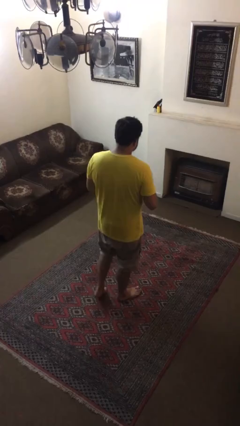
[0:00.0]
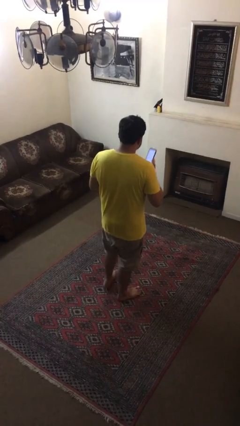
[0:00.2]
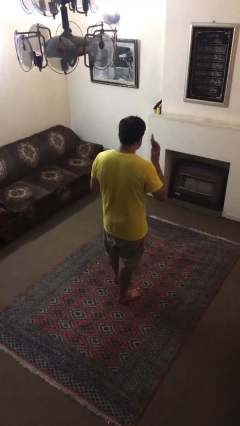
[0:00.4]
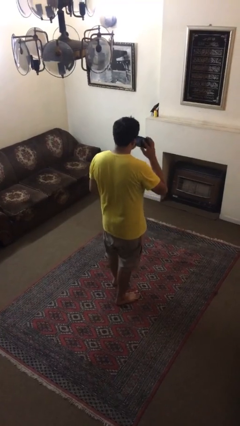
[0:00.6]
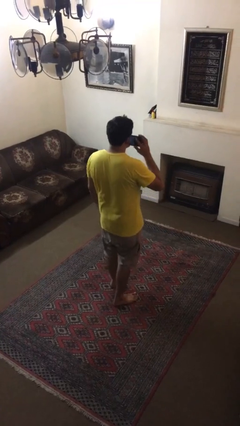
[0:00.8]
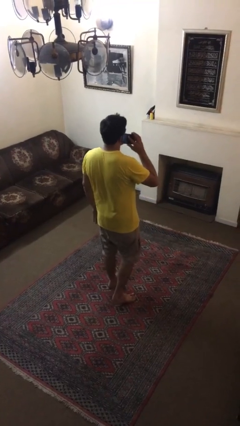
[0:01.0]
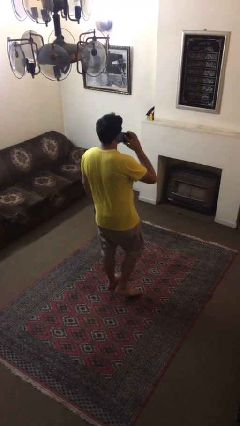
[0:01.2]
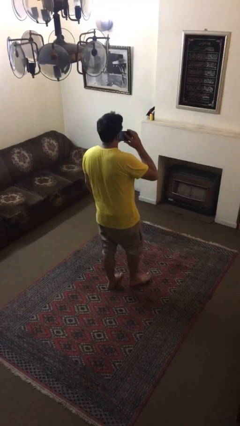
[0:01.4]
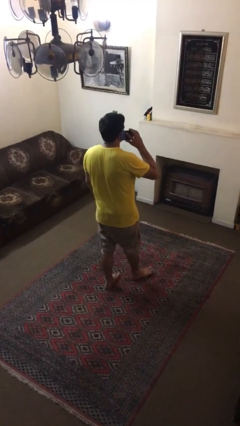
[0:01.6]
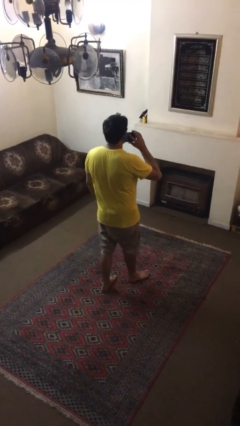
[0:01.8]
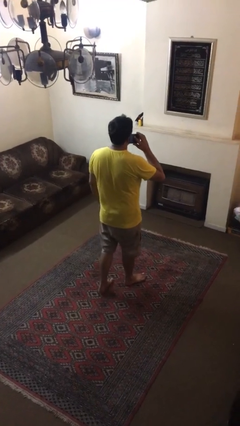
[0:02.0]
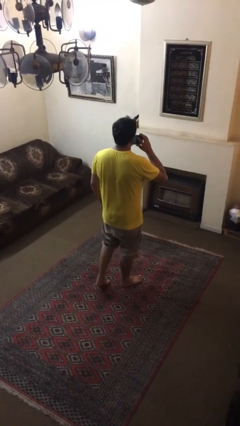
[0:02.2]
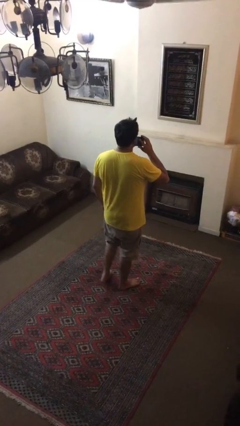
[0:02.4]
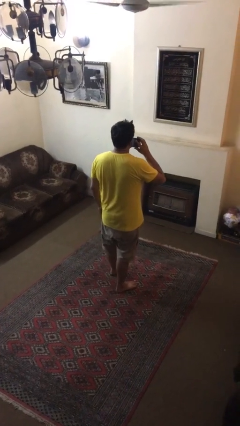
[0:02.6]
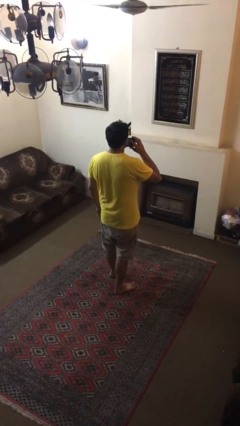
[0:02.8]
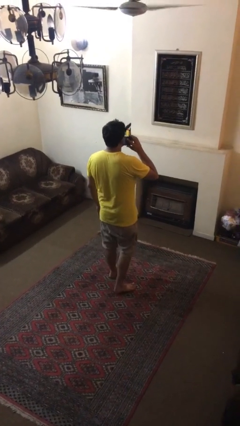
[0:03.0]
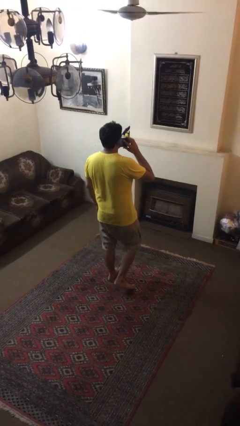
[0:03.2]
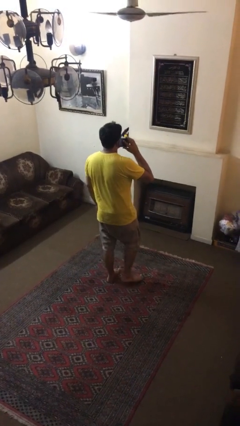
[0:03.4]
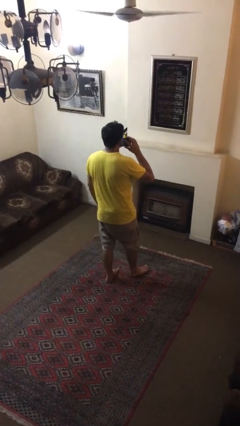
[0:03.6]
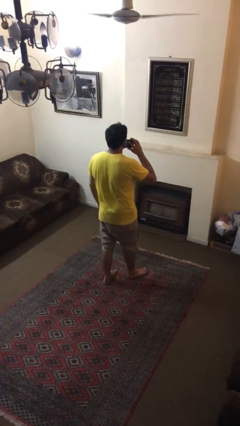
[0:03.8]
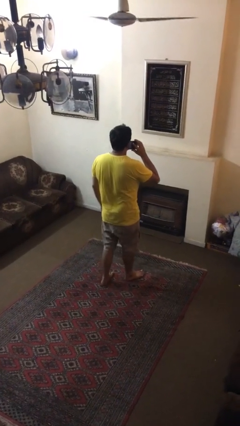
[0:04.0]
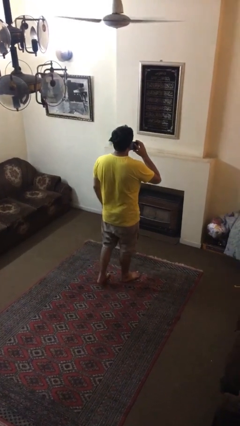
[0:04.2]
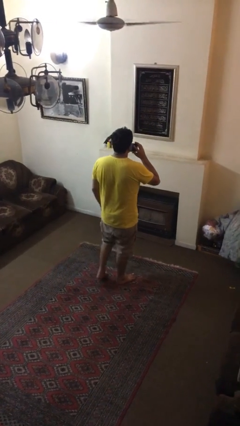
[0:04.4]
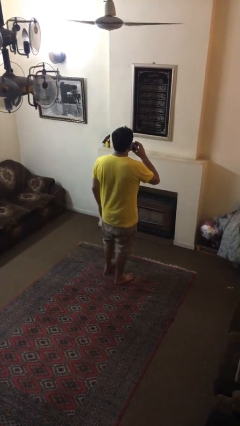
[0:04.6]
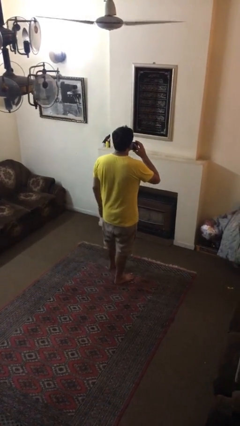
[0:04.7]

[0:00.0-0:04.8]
person talks on phone

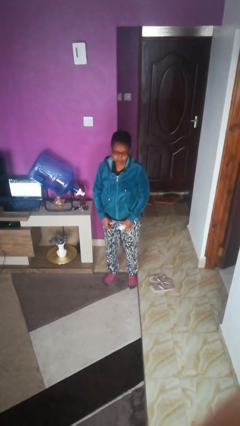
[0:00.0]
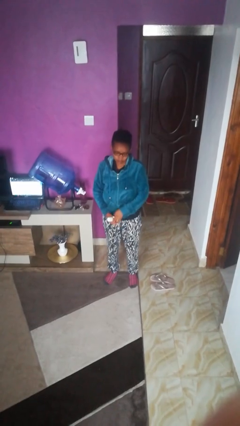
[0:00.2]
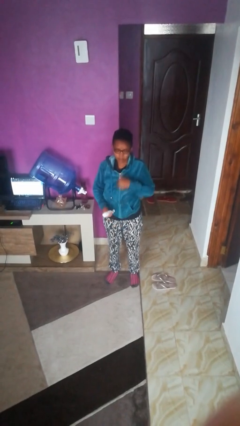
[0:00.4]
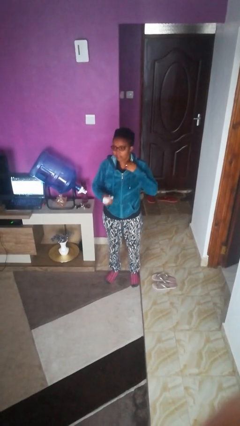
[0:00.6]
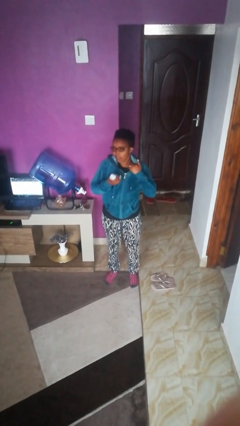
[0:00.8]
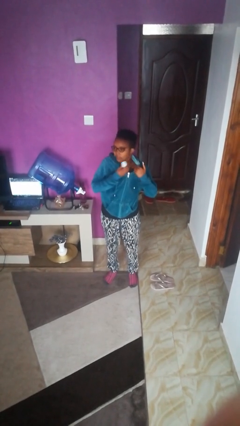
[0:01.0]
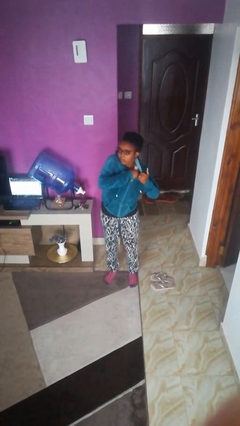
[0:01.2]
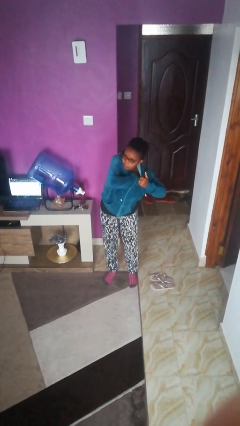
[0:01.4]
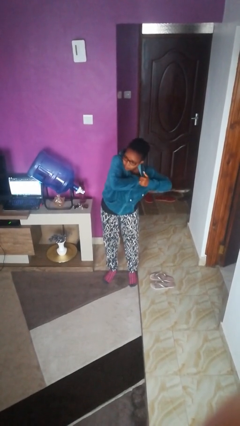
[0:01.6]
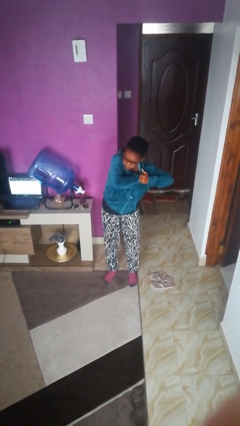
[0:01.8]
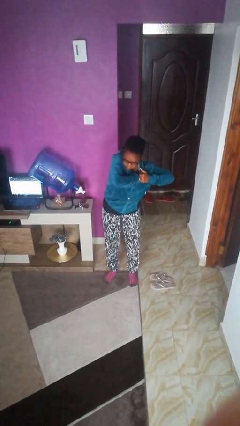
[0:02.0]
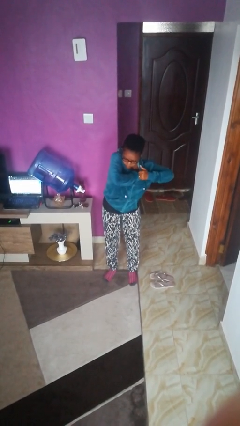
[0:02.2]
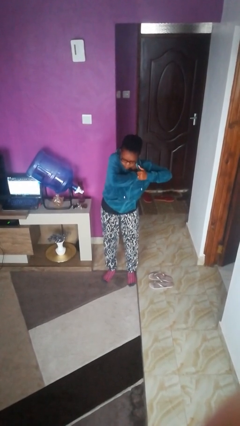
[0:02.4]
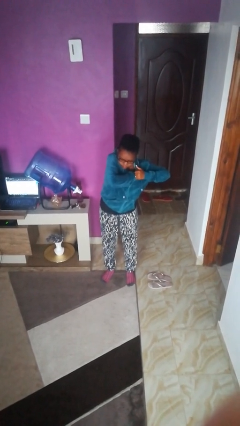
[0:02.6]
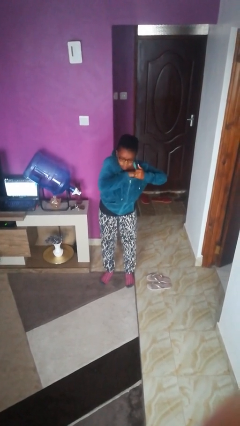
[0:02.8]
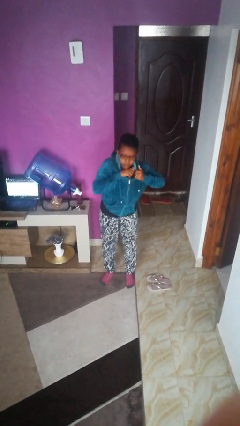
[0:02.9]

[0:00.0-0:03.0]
person applies deodorant

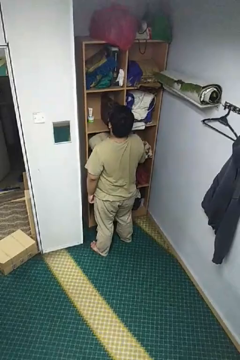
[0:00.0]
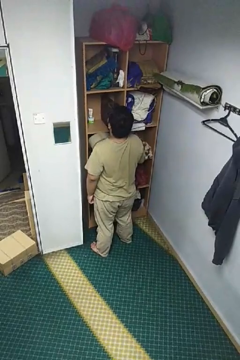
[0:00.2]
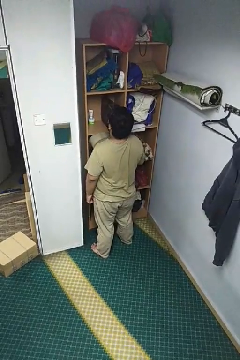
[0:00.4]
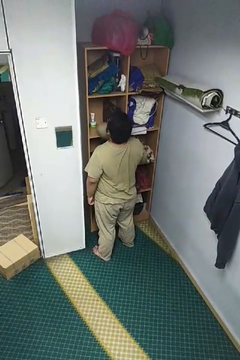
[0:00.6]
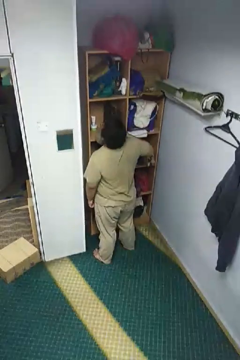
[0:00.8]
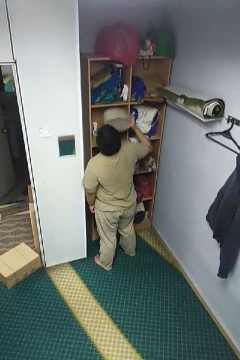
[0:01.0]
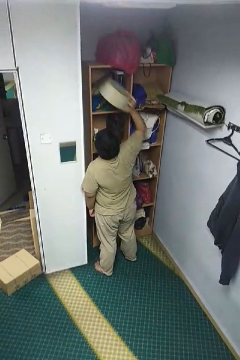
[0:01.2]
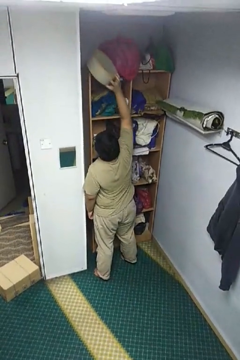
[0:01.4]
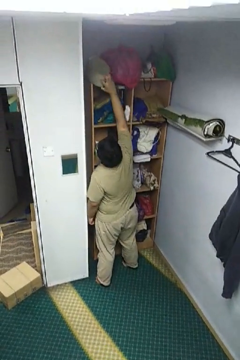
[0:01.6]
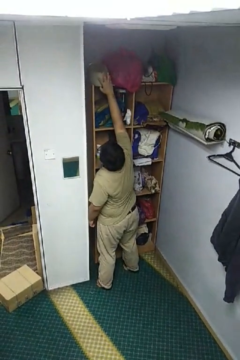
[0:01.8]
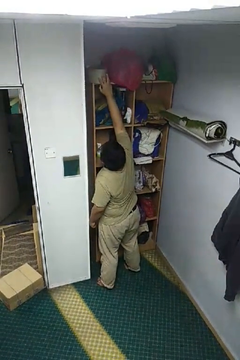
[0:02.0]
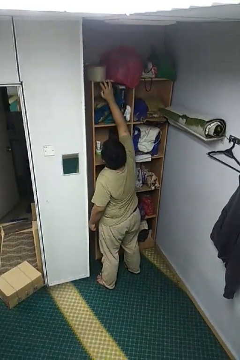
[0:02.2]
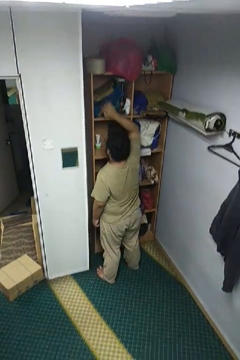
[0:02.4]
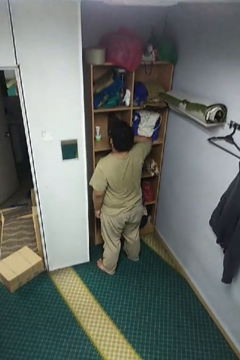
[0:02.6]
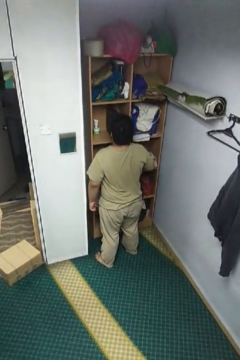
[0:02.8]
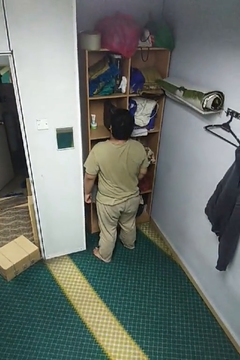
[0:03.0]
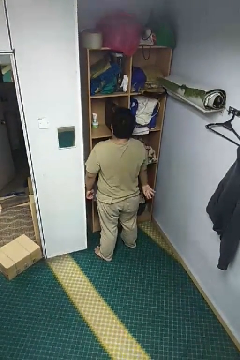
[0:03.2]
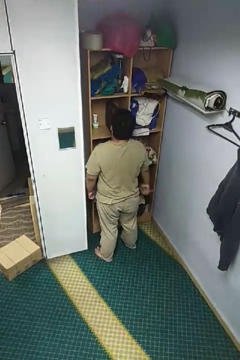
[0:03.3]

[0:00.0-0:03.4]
person puts down object on shelf

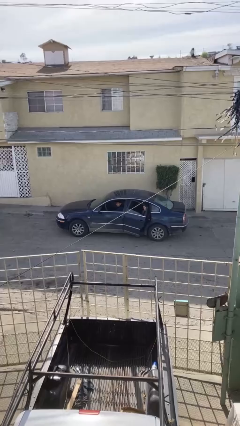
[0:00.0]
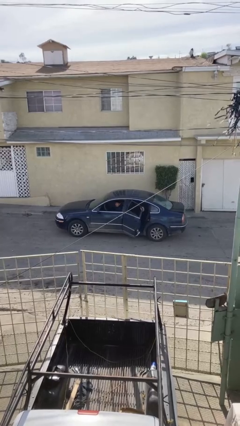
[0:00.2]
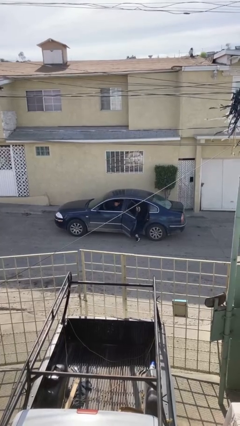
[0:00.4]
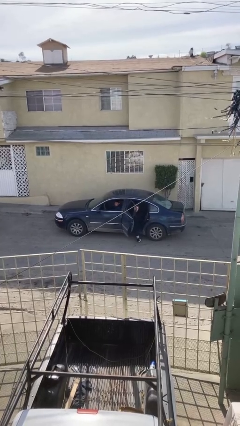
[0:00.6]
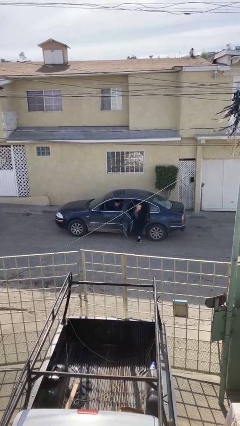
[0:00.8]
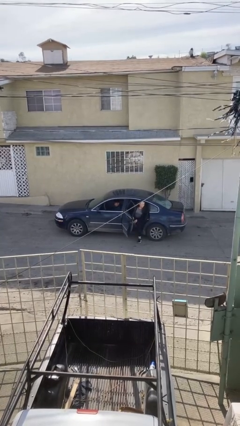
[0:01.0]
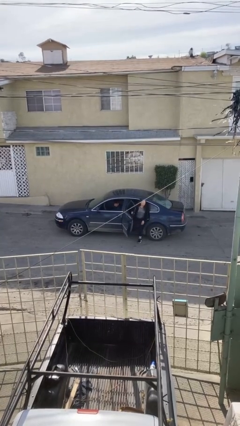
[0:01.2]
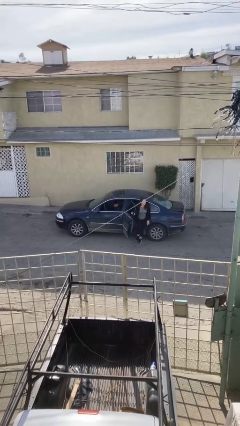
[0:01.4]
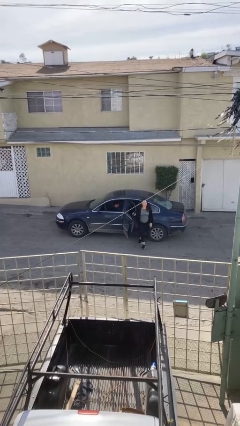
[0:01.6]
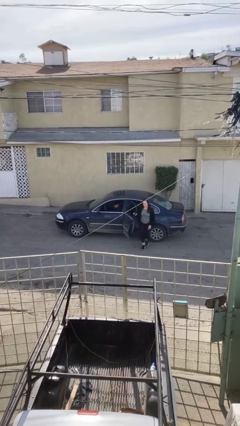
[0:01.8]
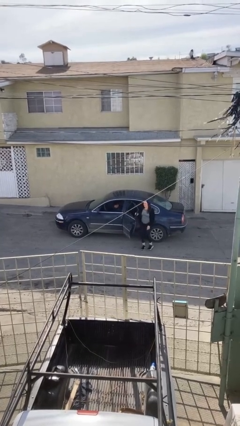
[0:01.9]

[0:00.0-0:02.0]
car drops off person

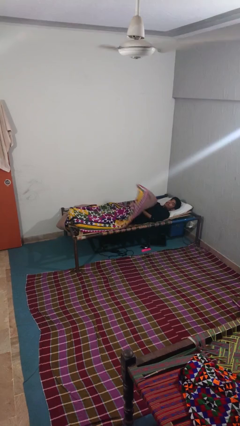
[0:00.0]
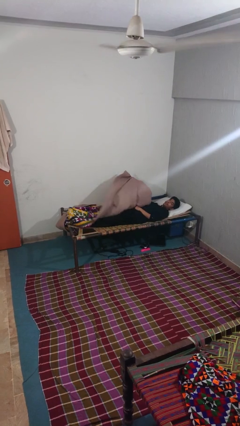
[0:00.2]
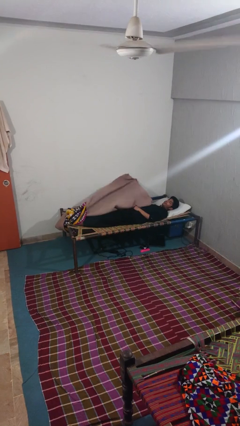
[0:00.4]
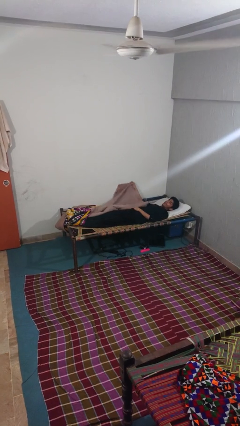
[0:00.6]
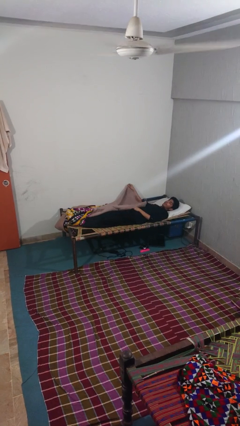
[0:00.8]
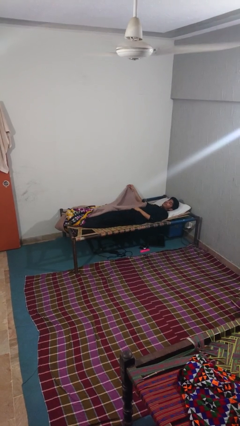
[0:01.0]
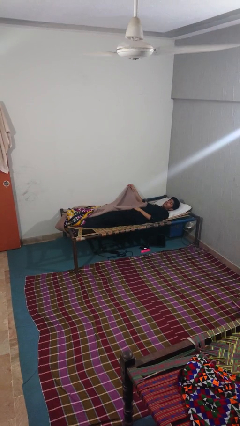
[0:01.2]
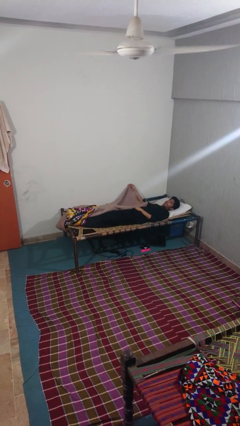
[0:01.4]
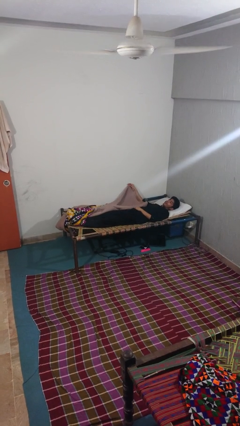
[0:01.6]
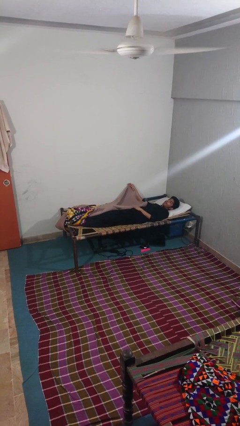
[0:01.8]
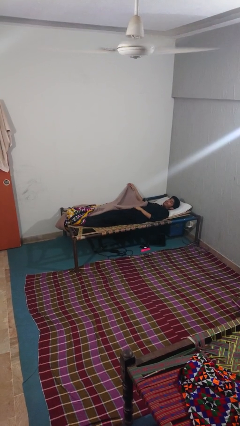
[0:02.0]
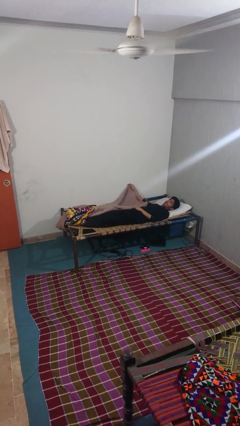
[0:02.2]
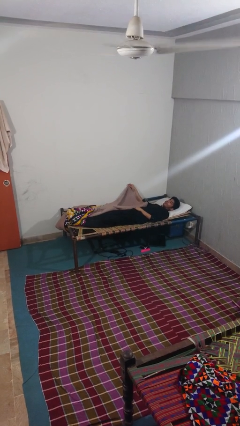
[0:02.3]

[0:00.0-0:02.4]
person uncovers with bedsheets

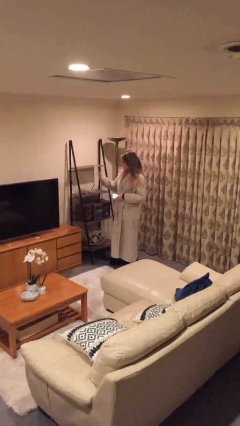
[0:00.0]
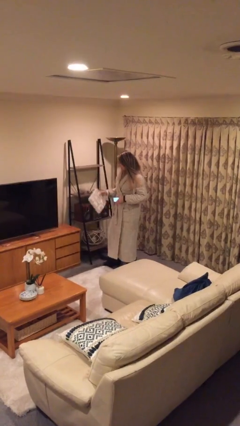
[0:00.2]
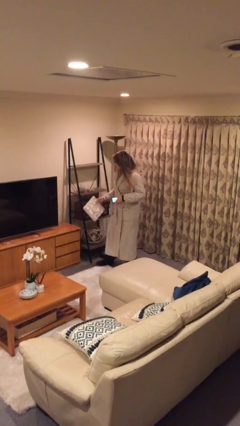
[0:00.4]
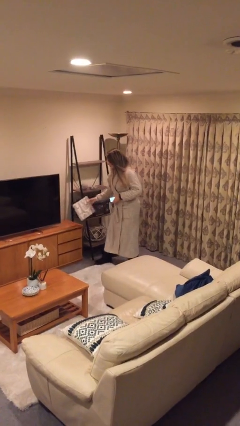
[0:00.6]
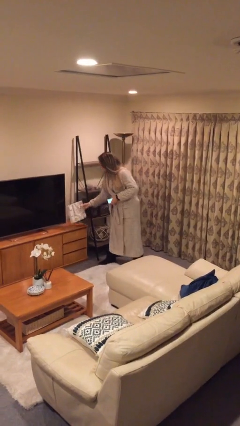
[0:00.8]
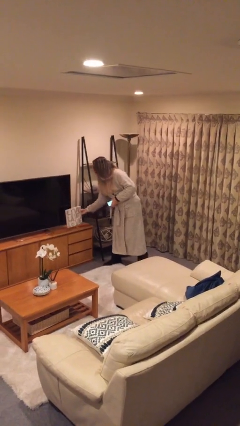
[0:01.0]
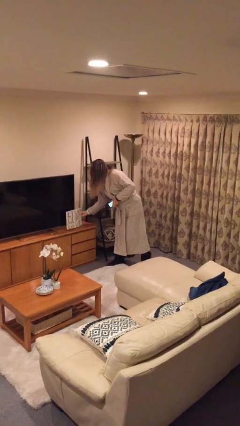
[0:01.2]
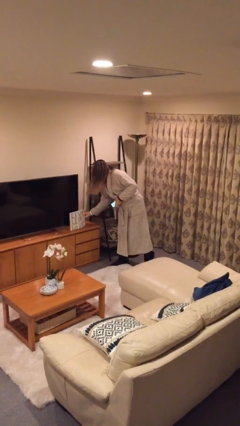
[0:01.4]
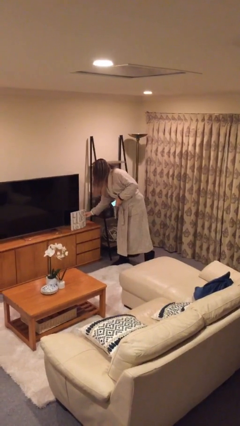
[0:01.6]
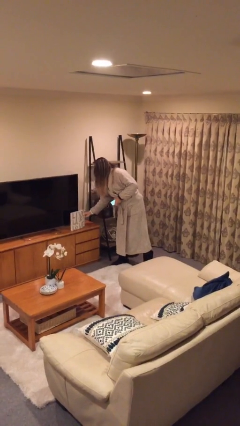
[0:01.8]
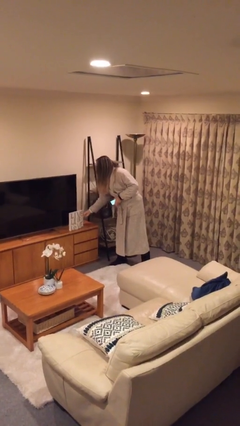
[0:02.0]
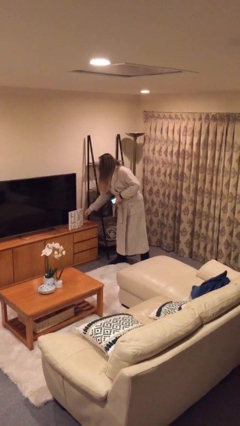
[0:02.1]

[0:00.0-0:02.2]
person puts down object on table

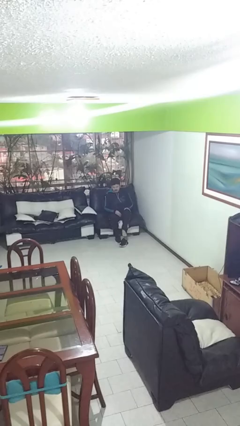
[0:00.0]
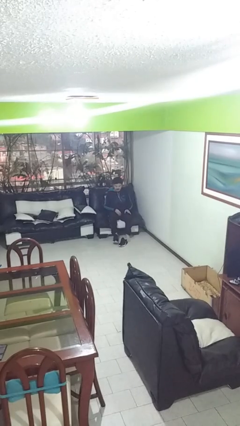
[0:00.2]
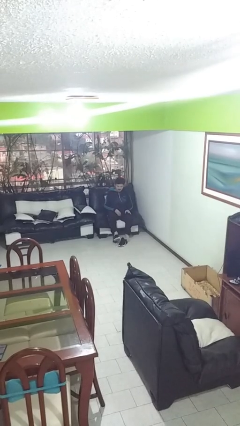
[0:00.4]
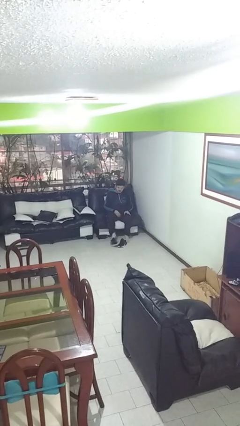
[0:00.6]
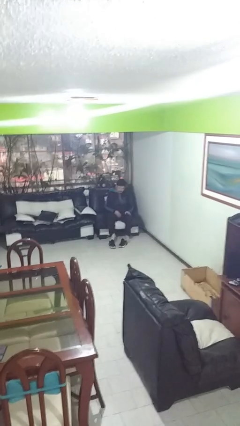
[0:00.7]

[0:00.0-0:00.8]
person takes off shoes
